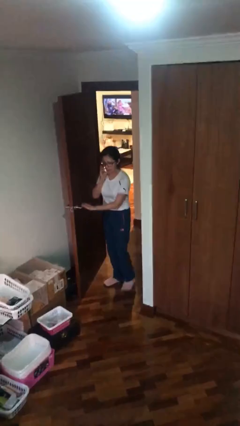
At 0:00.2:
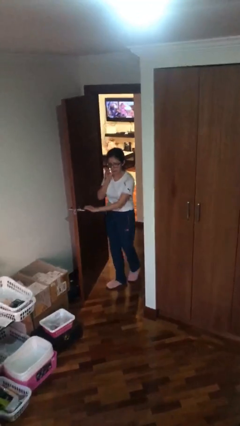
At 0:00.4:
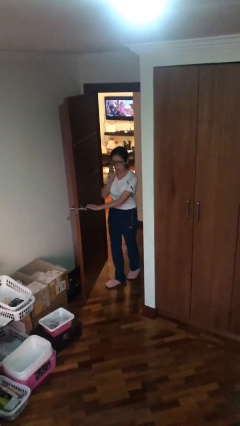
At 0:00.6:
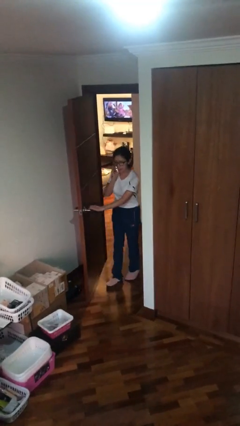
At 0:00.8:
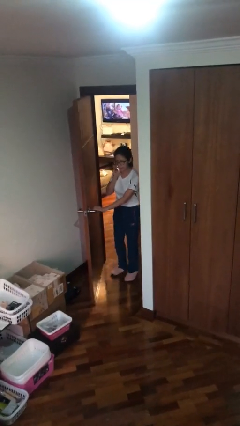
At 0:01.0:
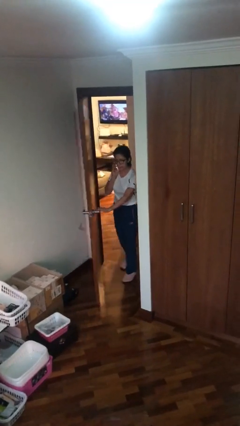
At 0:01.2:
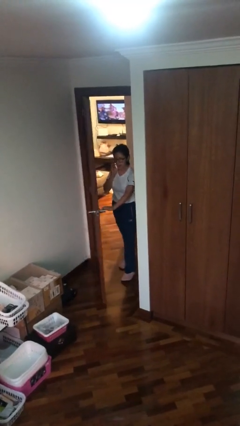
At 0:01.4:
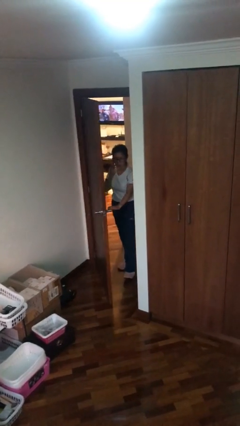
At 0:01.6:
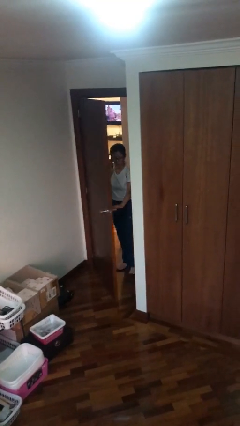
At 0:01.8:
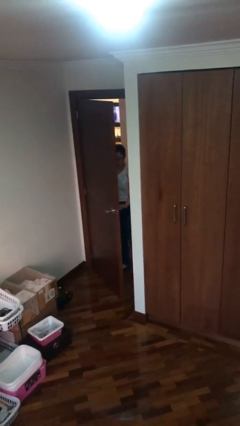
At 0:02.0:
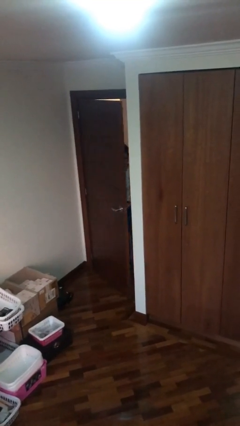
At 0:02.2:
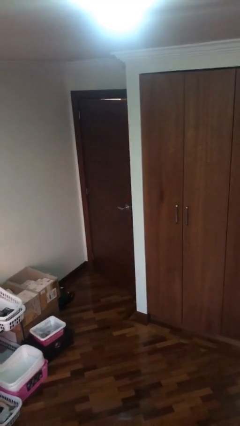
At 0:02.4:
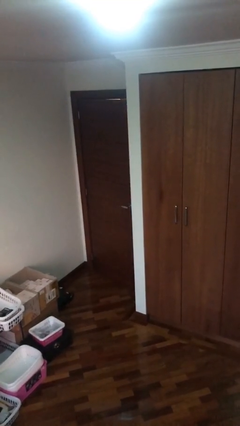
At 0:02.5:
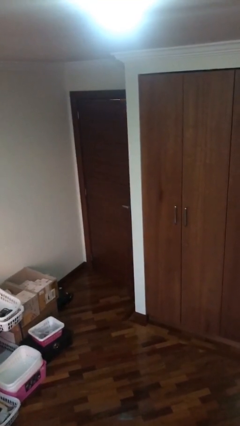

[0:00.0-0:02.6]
person closes facility door

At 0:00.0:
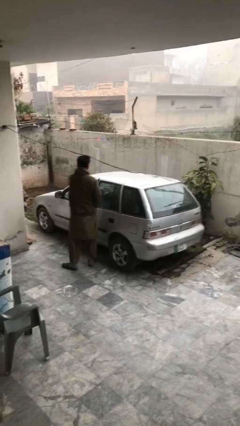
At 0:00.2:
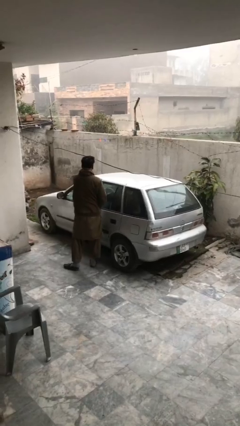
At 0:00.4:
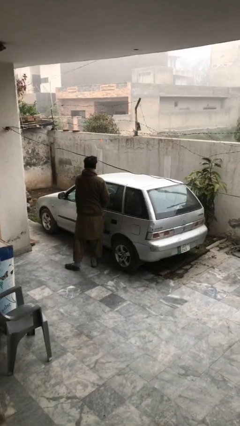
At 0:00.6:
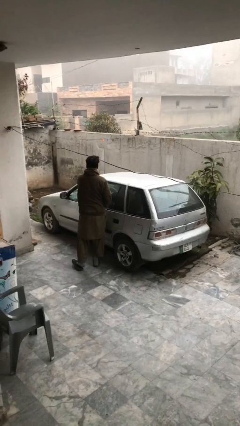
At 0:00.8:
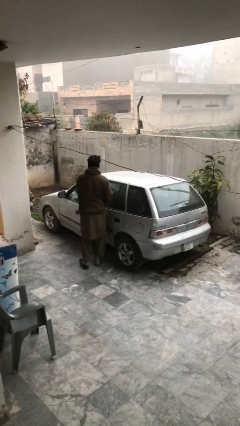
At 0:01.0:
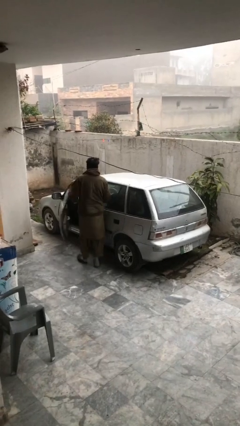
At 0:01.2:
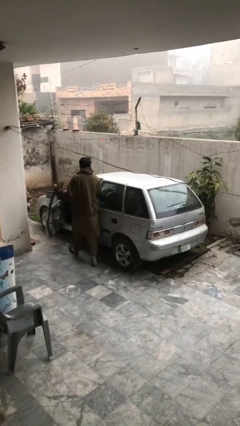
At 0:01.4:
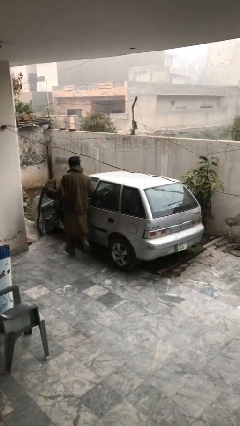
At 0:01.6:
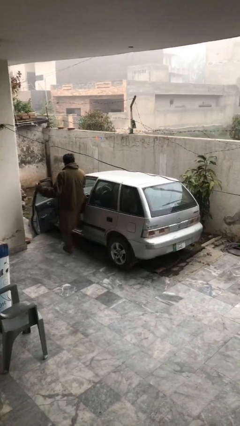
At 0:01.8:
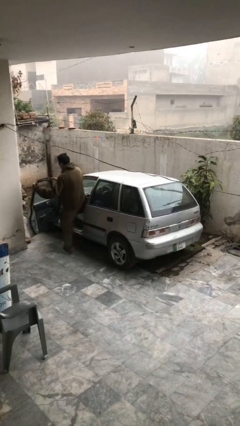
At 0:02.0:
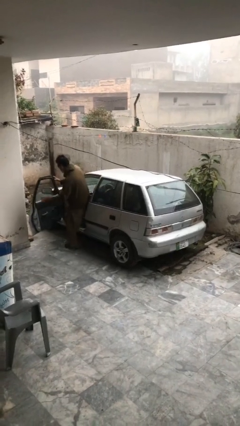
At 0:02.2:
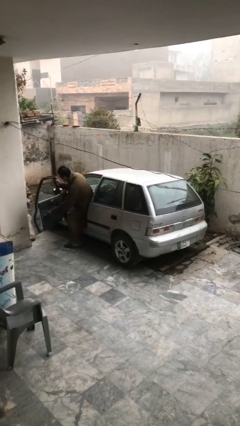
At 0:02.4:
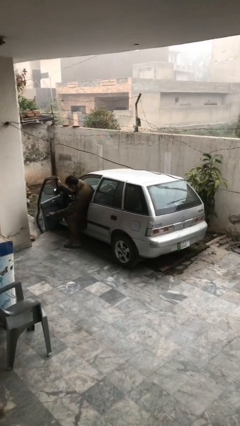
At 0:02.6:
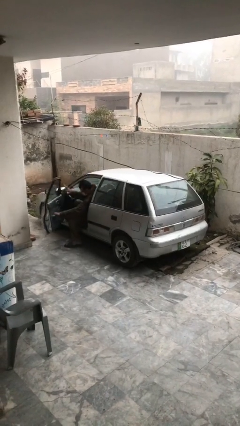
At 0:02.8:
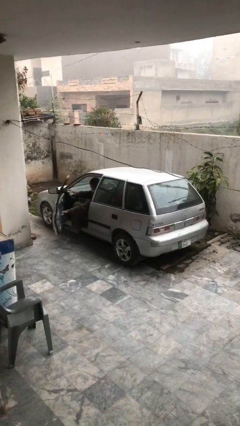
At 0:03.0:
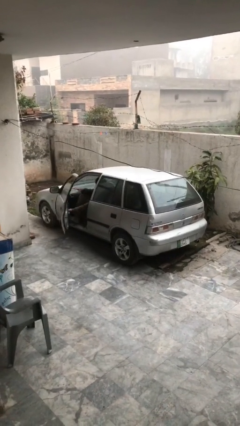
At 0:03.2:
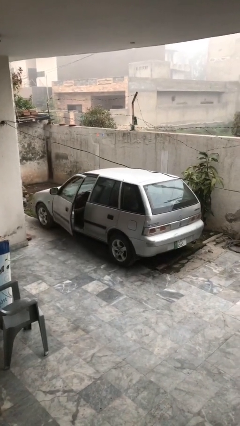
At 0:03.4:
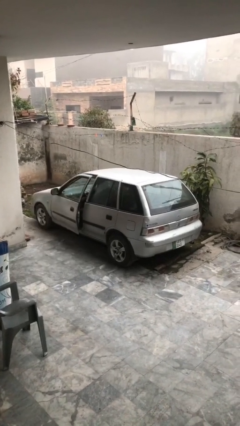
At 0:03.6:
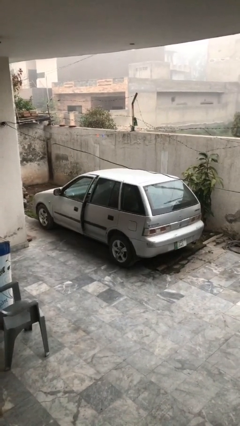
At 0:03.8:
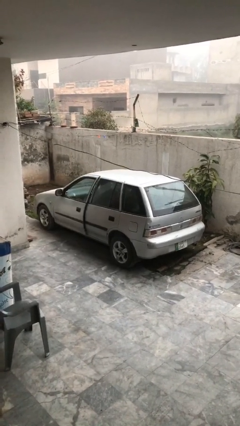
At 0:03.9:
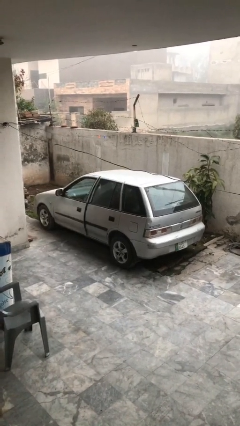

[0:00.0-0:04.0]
car picks up person

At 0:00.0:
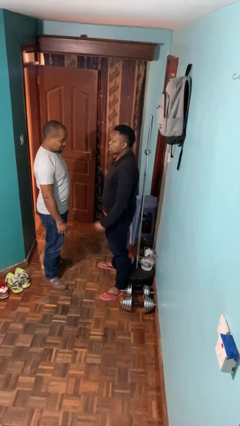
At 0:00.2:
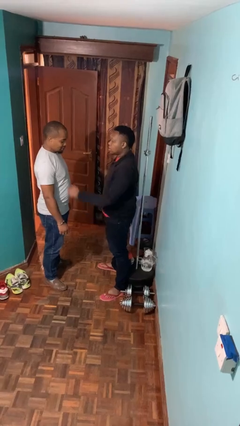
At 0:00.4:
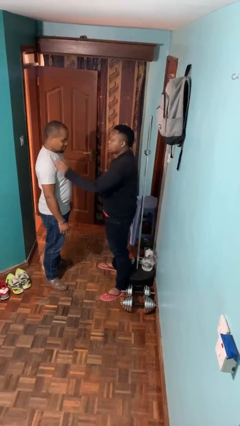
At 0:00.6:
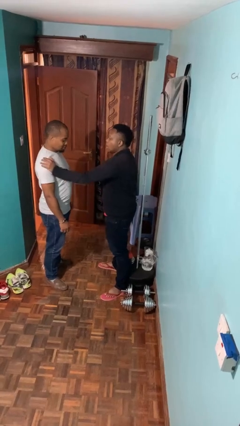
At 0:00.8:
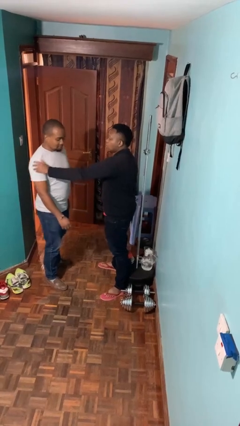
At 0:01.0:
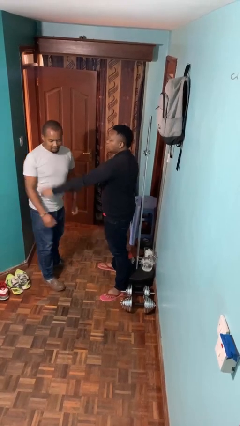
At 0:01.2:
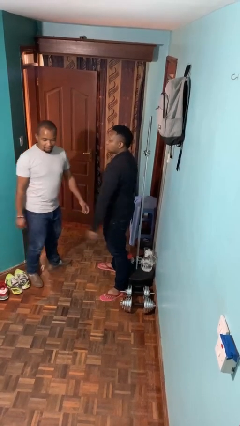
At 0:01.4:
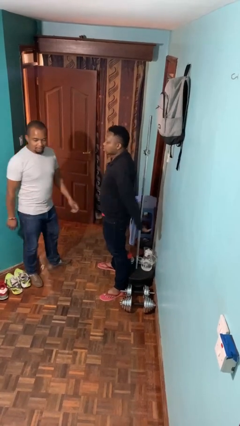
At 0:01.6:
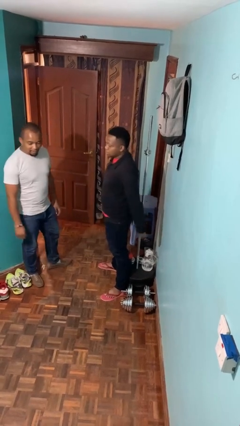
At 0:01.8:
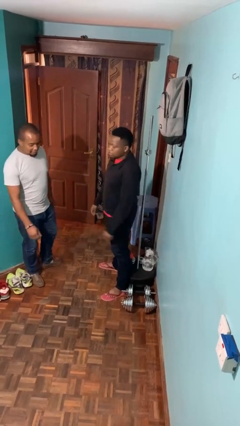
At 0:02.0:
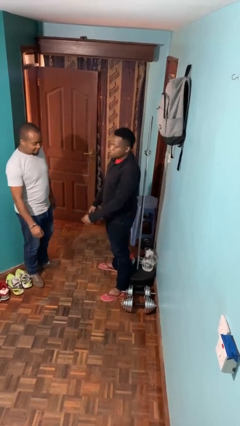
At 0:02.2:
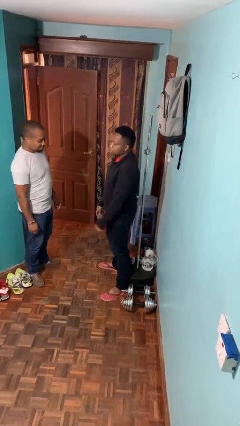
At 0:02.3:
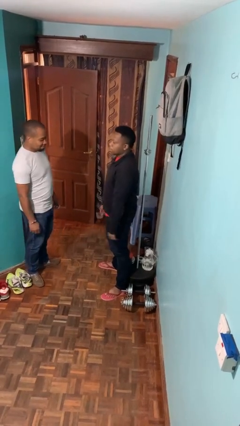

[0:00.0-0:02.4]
person shoves person

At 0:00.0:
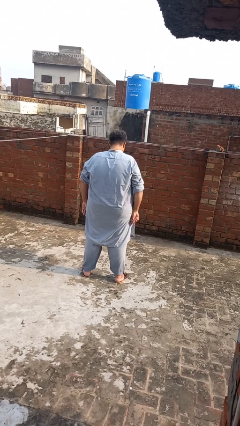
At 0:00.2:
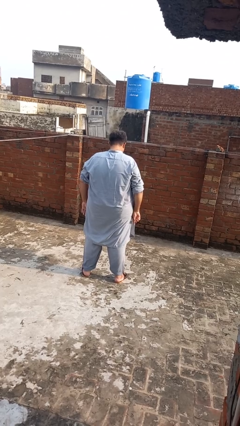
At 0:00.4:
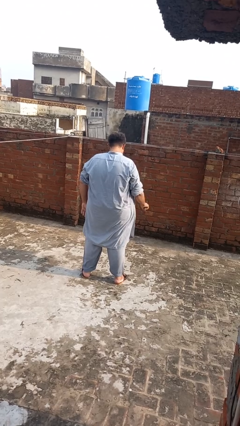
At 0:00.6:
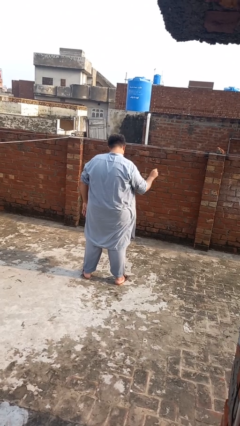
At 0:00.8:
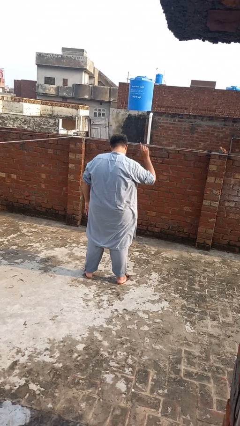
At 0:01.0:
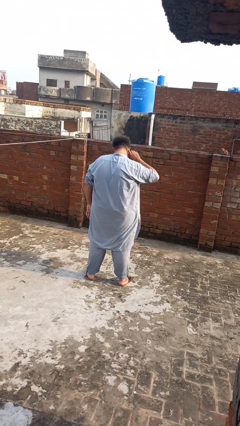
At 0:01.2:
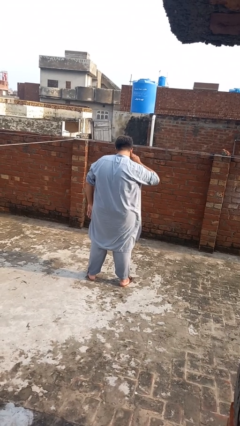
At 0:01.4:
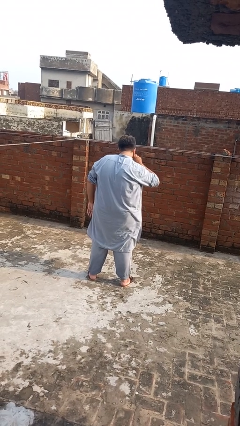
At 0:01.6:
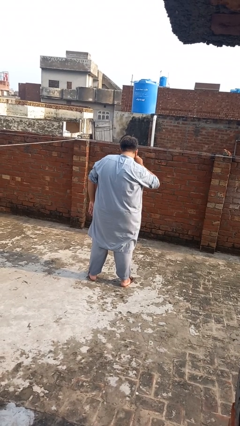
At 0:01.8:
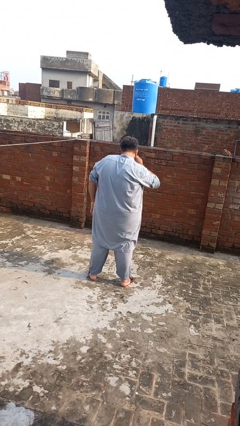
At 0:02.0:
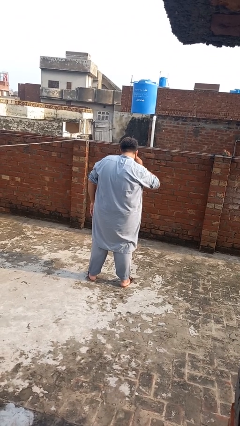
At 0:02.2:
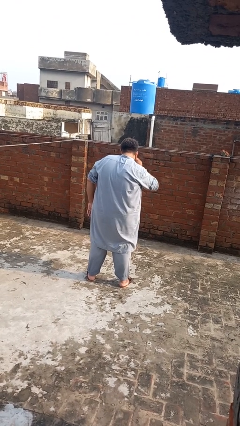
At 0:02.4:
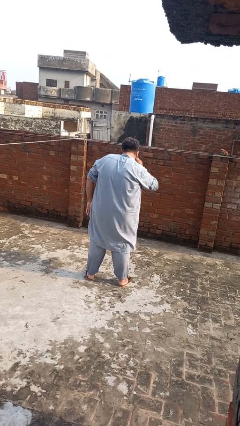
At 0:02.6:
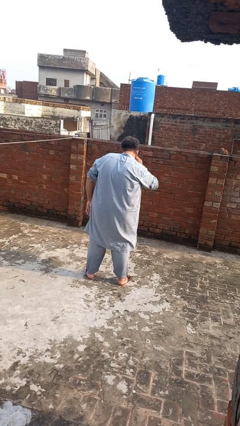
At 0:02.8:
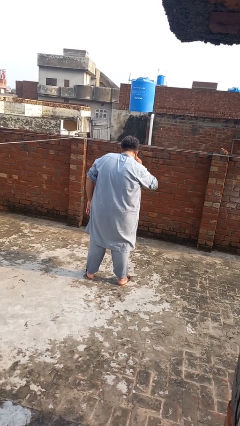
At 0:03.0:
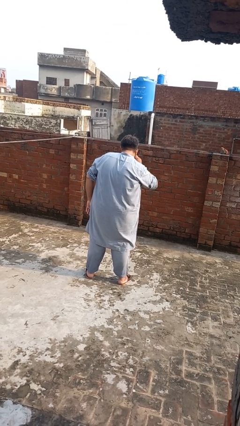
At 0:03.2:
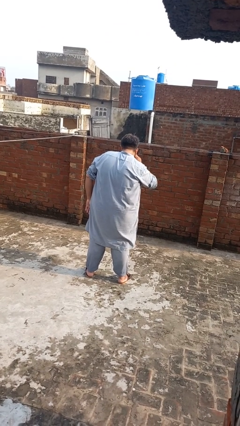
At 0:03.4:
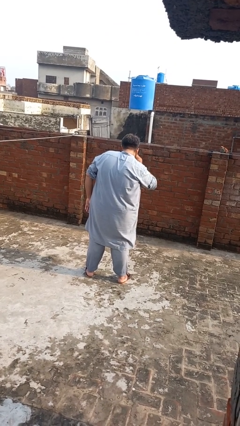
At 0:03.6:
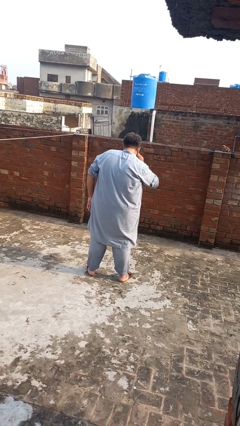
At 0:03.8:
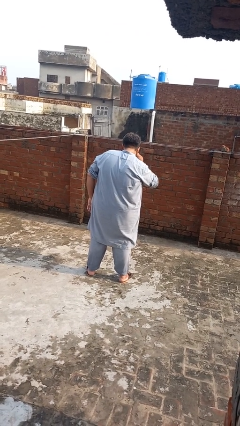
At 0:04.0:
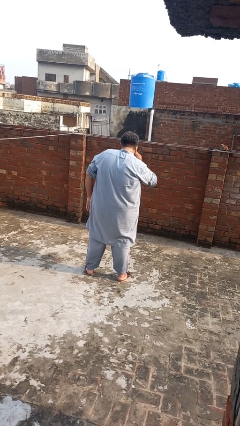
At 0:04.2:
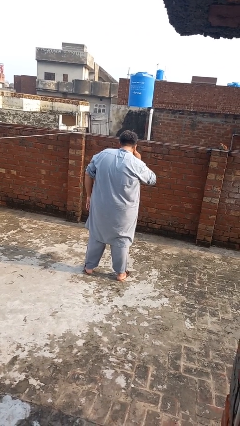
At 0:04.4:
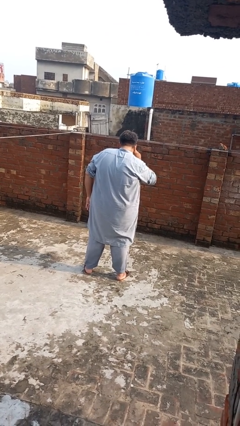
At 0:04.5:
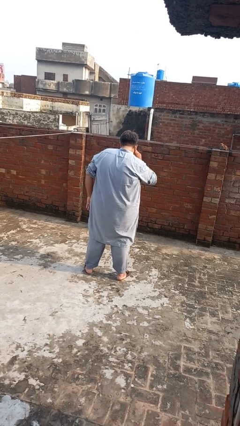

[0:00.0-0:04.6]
person gestures listen closely

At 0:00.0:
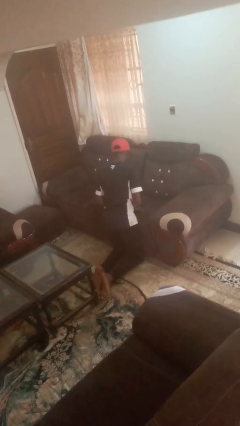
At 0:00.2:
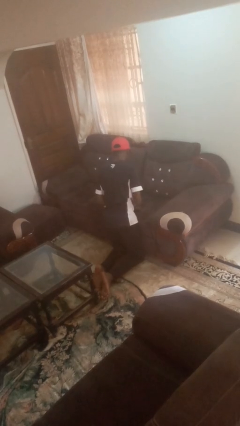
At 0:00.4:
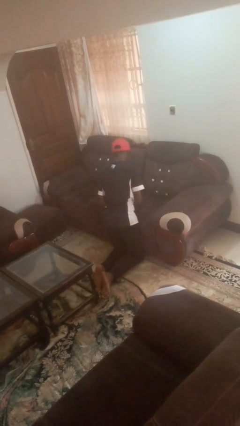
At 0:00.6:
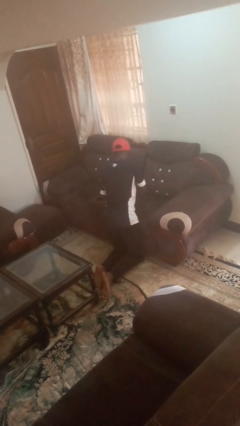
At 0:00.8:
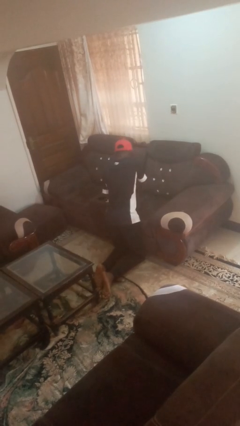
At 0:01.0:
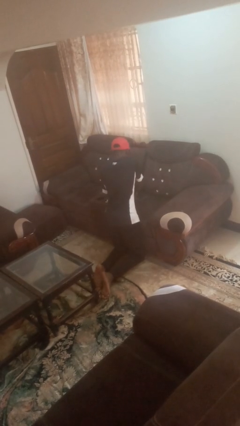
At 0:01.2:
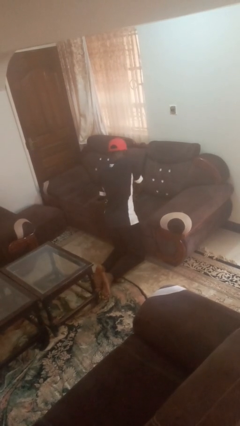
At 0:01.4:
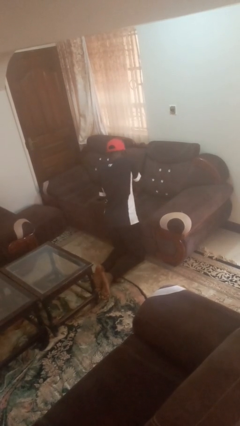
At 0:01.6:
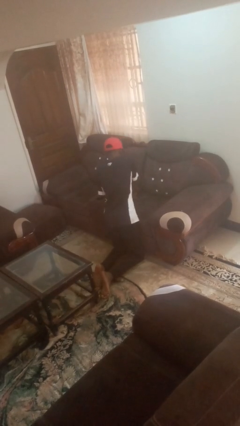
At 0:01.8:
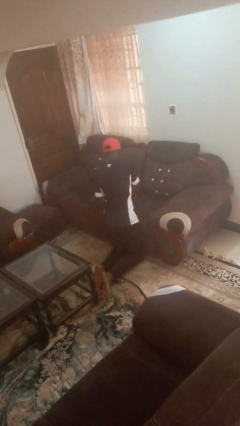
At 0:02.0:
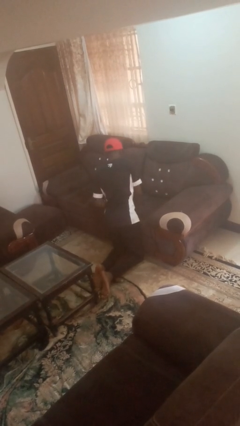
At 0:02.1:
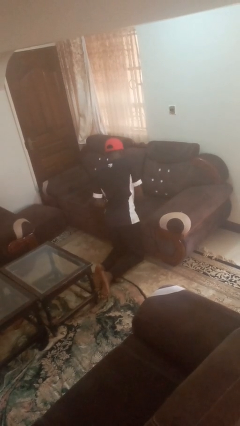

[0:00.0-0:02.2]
person searches in couch

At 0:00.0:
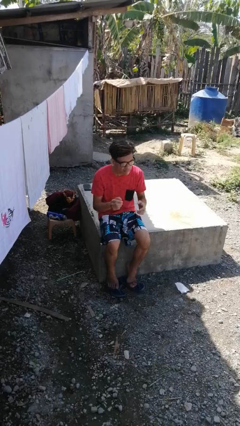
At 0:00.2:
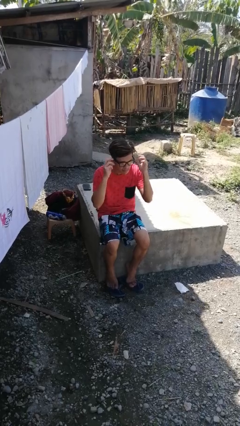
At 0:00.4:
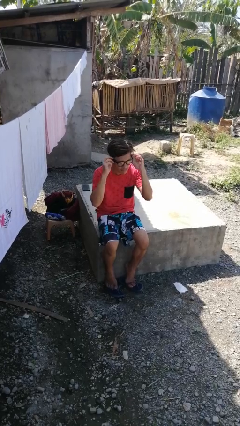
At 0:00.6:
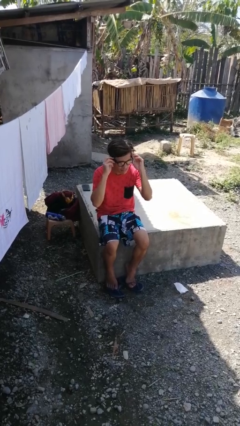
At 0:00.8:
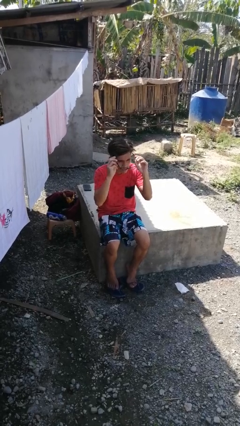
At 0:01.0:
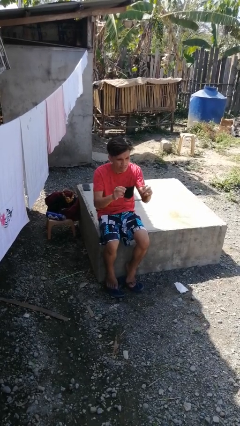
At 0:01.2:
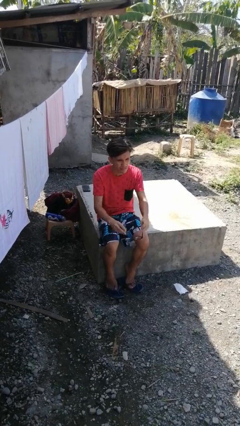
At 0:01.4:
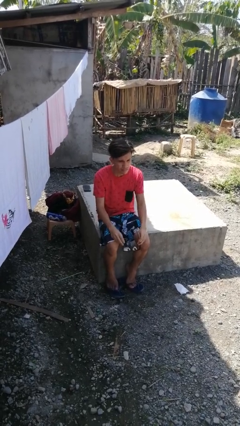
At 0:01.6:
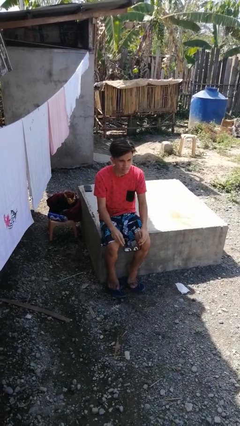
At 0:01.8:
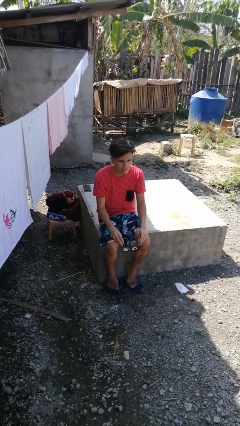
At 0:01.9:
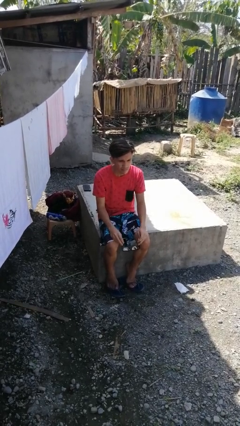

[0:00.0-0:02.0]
person takes off glasses
